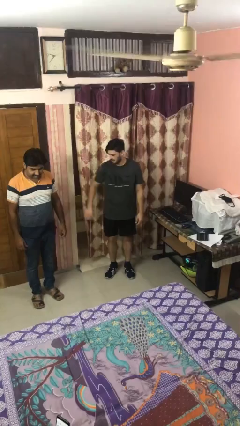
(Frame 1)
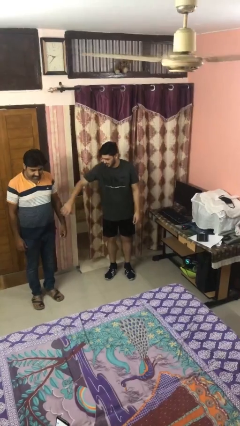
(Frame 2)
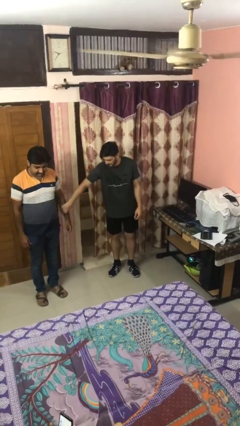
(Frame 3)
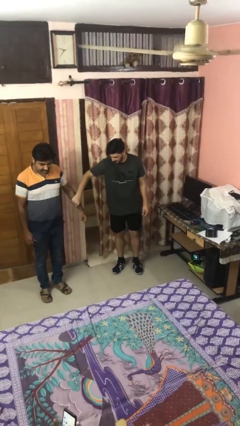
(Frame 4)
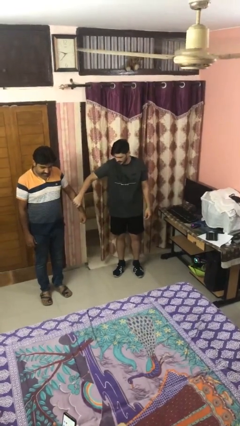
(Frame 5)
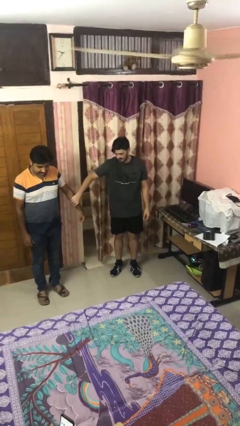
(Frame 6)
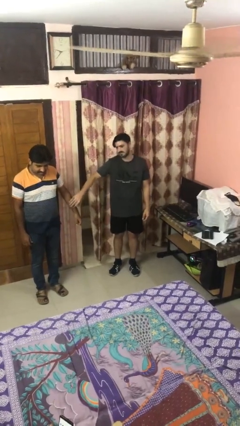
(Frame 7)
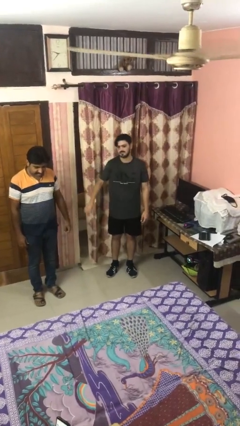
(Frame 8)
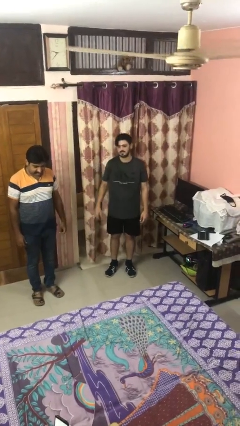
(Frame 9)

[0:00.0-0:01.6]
person grabs person by forearm

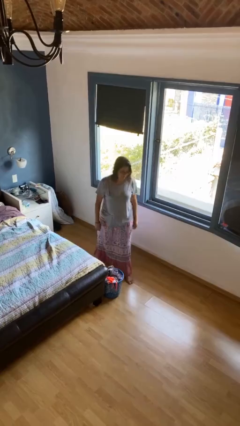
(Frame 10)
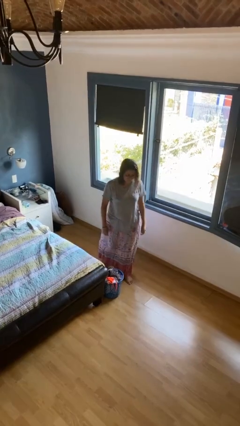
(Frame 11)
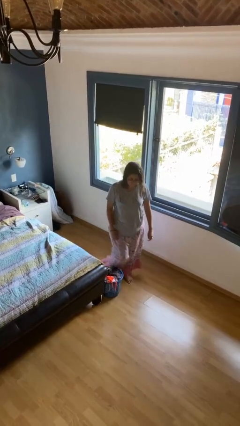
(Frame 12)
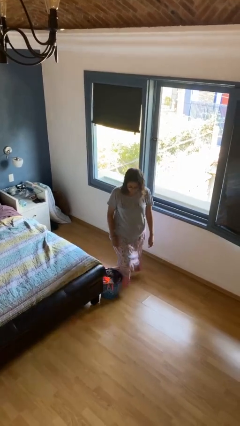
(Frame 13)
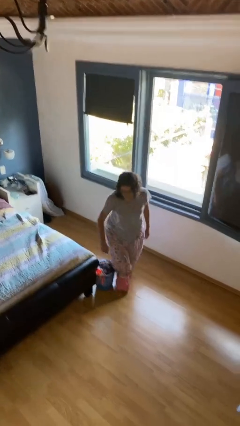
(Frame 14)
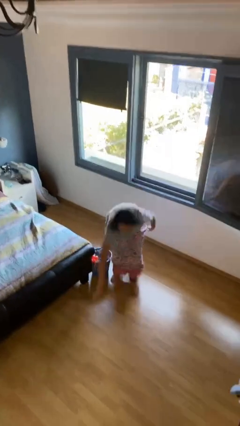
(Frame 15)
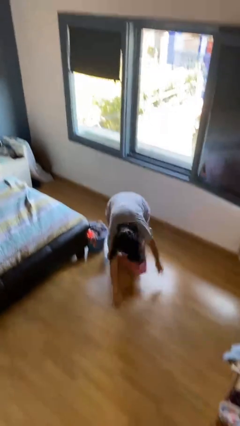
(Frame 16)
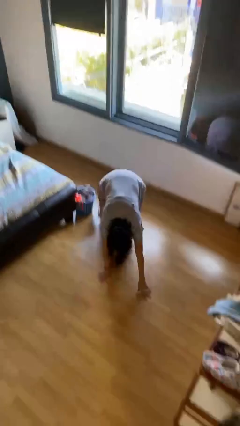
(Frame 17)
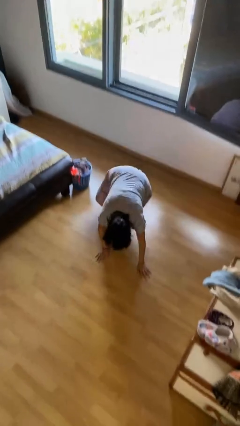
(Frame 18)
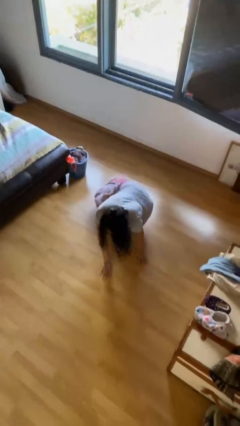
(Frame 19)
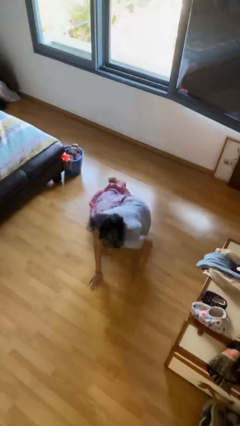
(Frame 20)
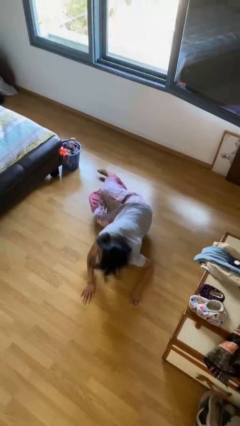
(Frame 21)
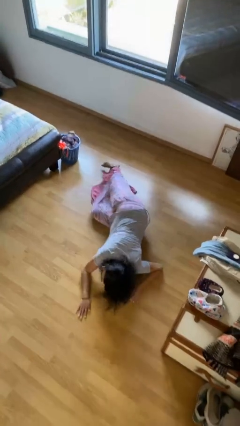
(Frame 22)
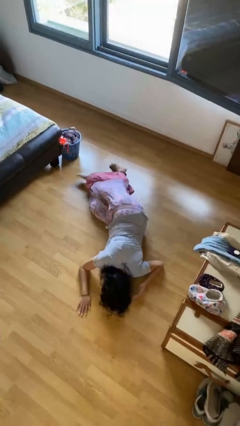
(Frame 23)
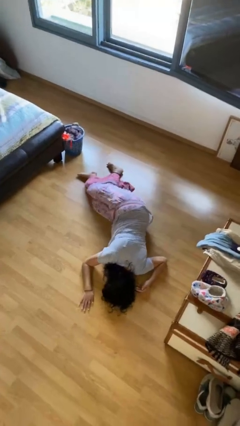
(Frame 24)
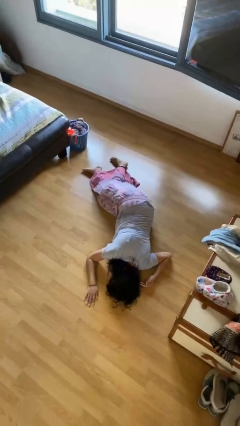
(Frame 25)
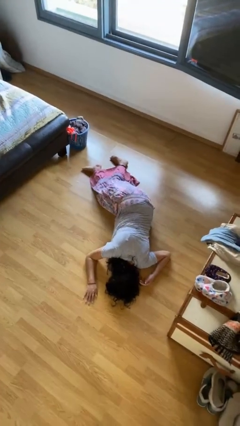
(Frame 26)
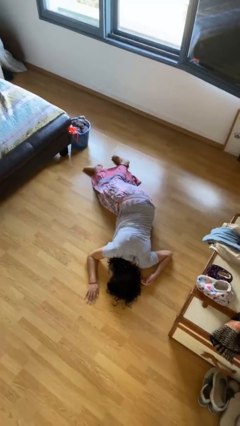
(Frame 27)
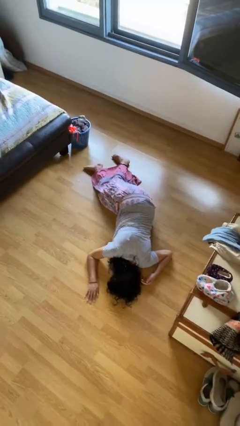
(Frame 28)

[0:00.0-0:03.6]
person trips on object on floor

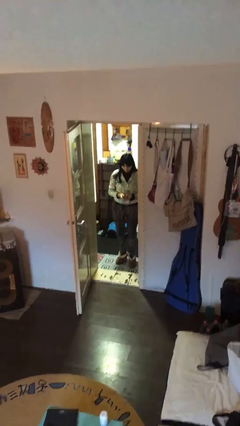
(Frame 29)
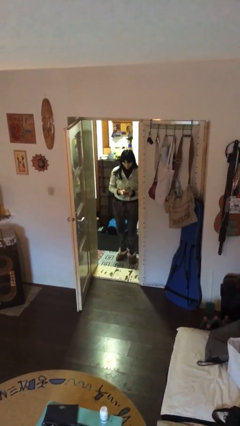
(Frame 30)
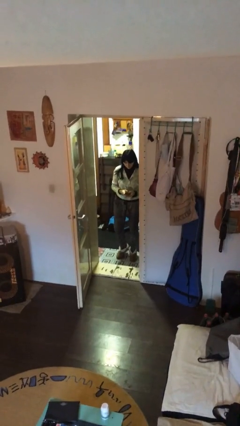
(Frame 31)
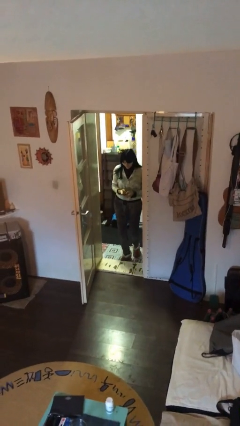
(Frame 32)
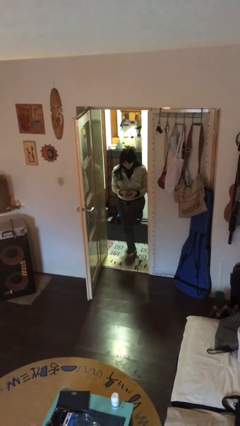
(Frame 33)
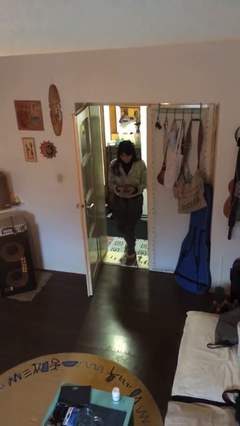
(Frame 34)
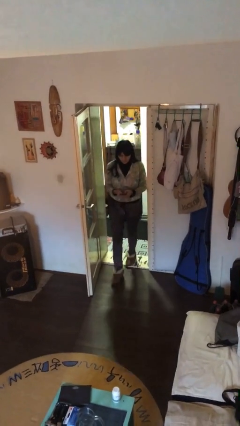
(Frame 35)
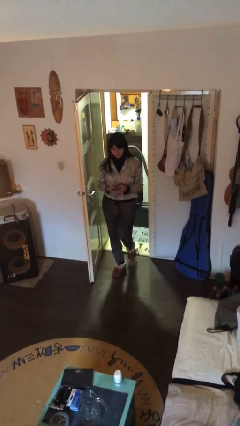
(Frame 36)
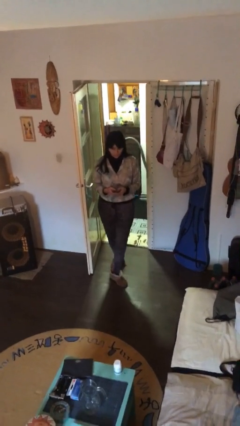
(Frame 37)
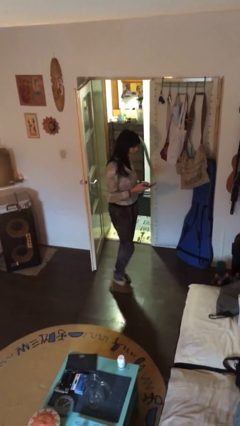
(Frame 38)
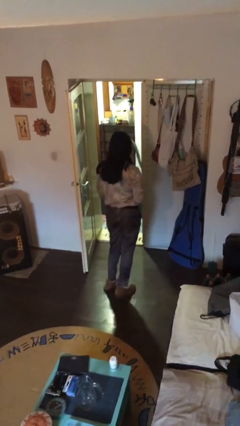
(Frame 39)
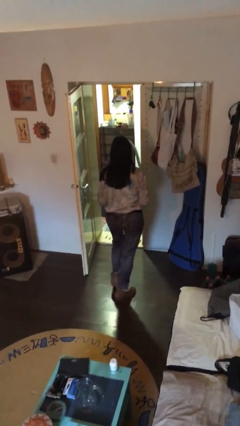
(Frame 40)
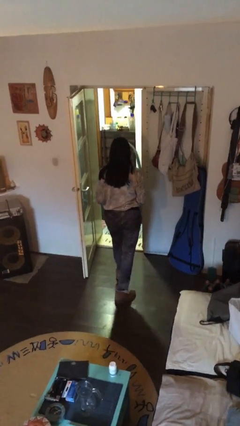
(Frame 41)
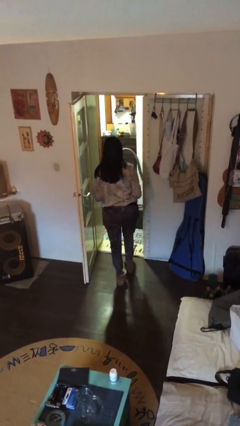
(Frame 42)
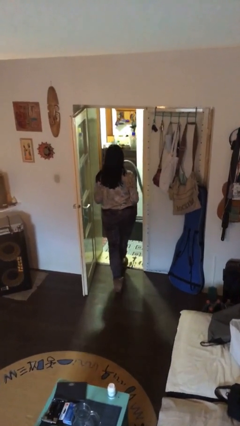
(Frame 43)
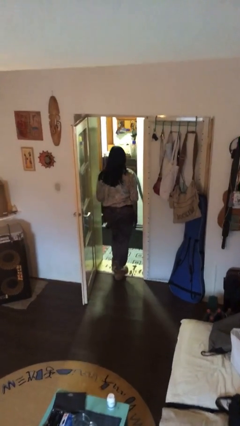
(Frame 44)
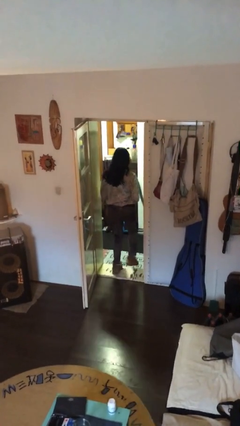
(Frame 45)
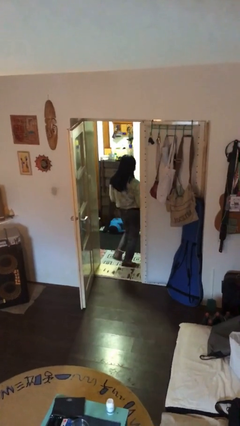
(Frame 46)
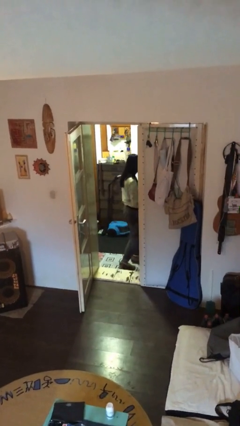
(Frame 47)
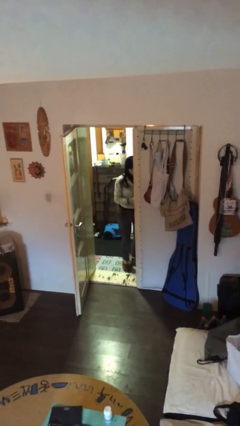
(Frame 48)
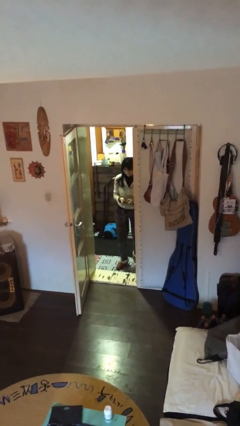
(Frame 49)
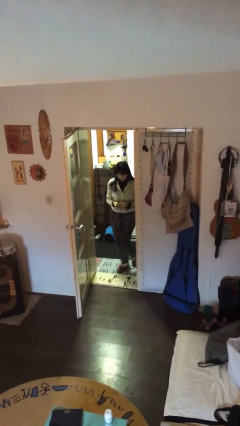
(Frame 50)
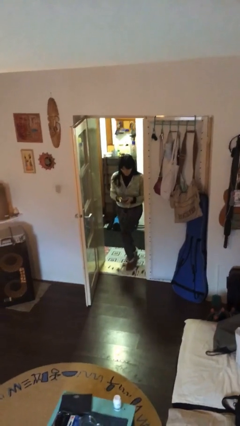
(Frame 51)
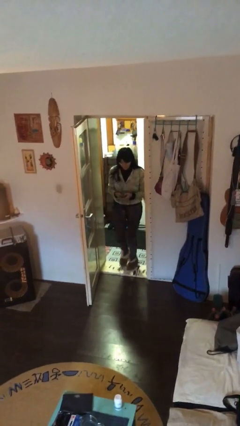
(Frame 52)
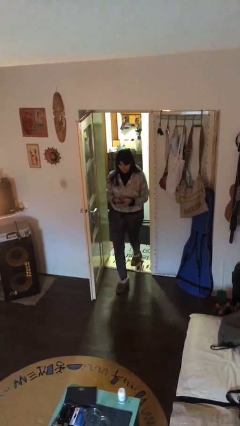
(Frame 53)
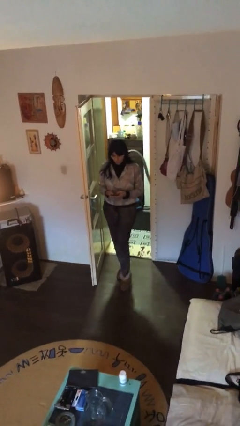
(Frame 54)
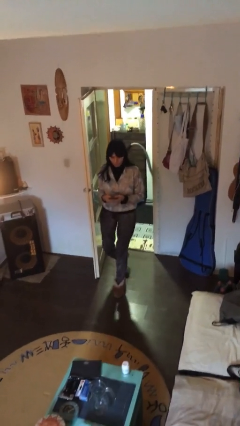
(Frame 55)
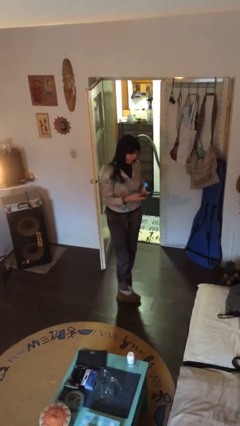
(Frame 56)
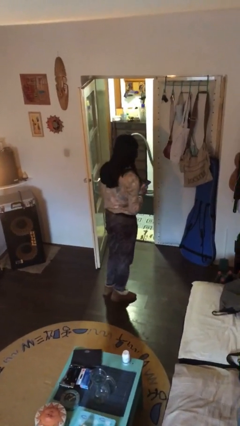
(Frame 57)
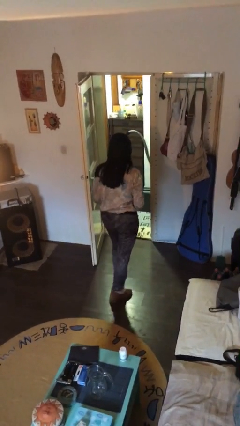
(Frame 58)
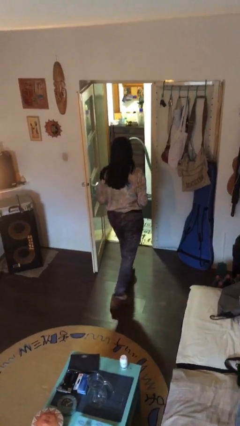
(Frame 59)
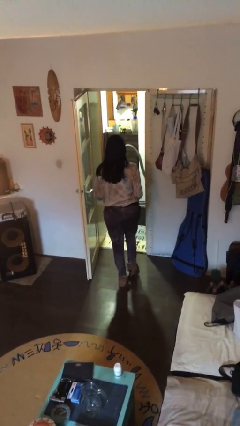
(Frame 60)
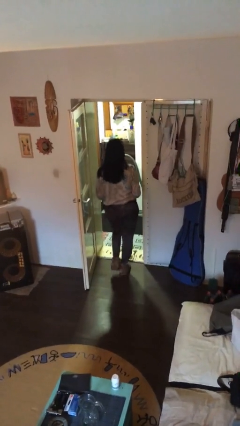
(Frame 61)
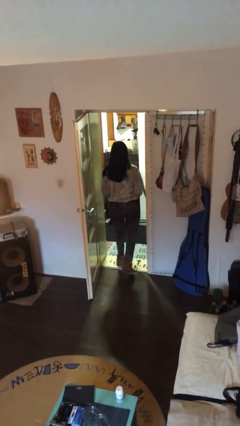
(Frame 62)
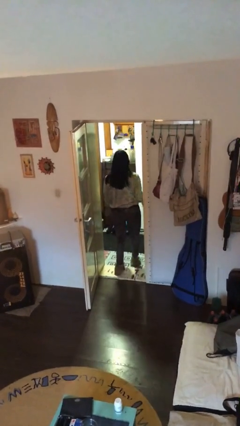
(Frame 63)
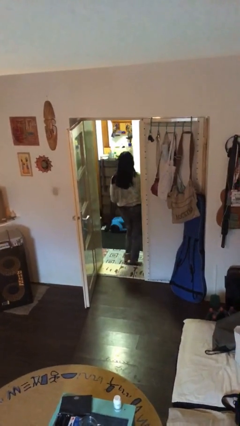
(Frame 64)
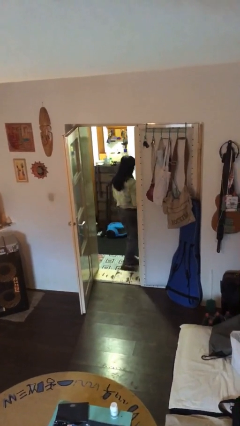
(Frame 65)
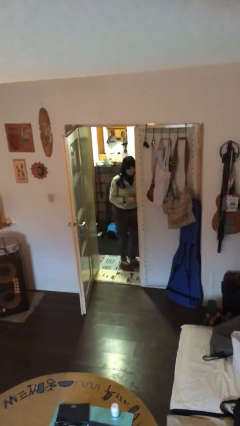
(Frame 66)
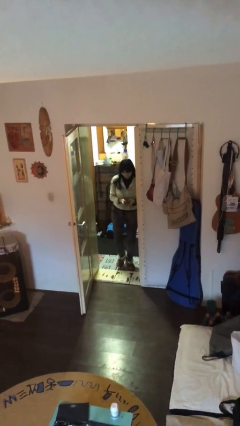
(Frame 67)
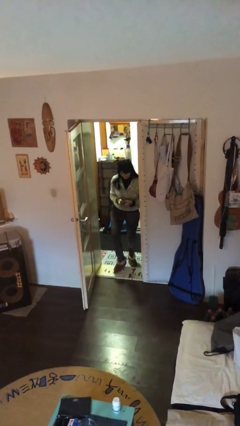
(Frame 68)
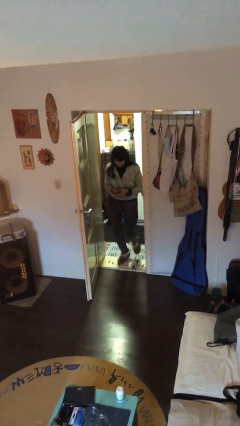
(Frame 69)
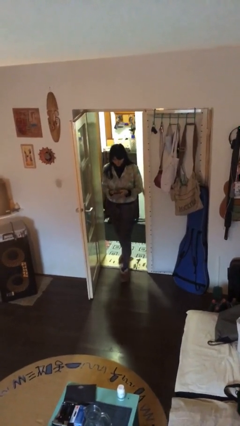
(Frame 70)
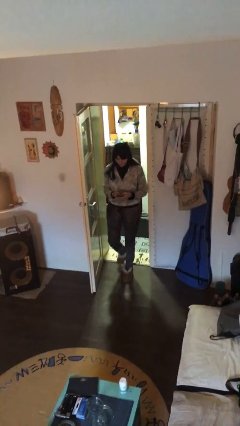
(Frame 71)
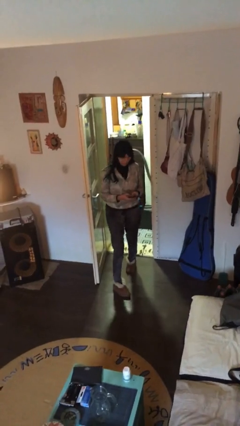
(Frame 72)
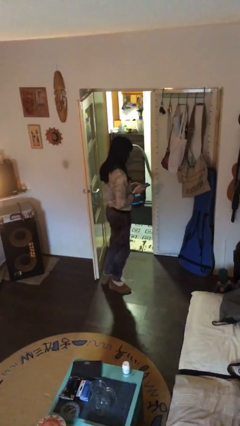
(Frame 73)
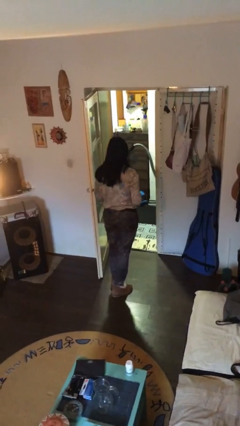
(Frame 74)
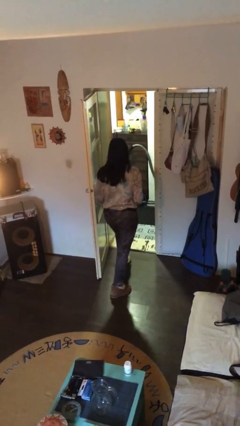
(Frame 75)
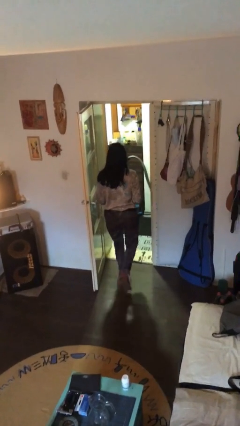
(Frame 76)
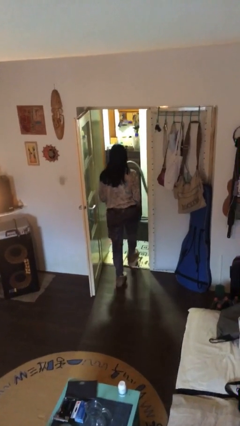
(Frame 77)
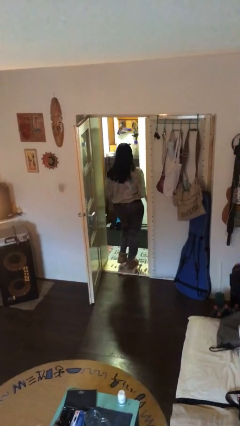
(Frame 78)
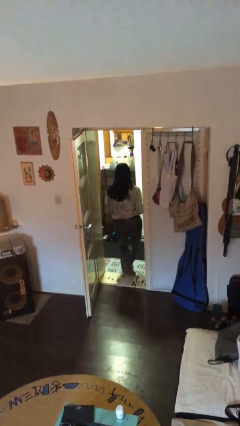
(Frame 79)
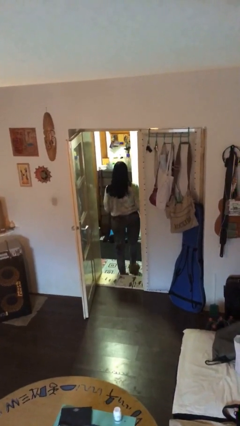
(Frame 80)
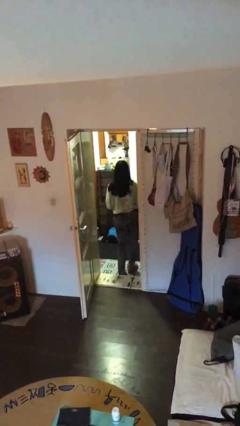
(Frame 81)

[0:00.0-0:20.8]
person texts on phone

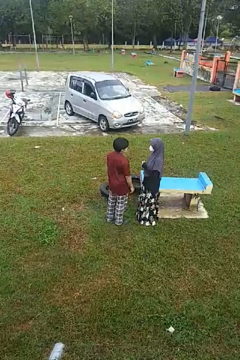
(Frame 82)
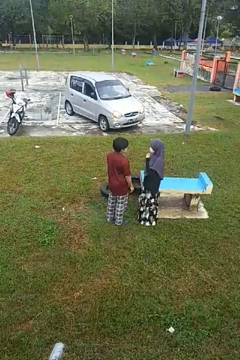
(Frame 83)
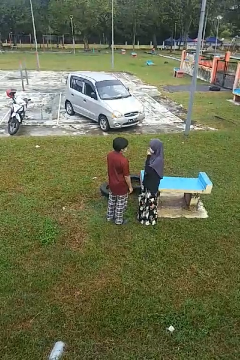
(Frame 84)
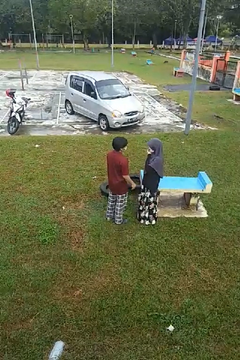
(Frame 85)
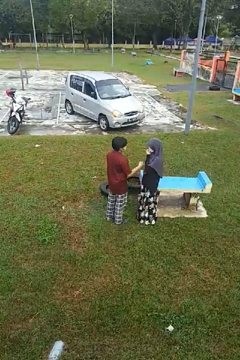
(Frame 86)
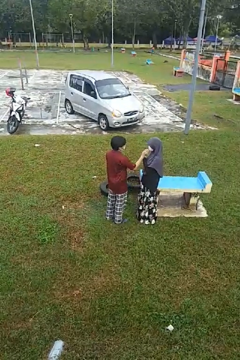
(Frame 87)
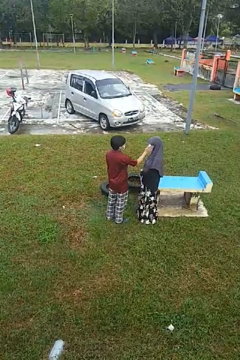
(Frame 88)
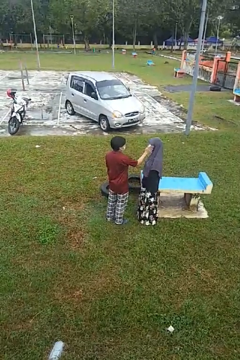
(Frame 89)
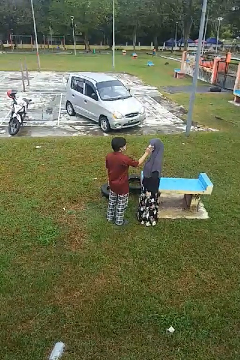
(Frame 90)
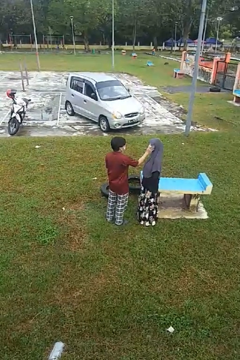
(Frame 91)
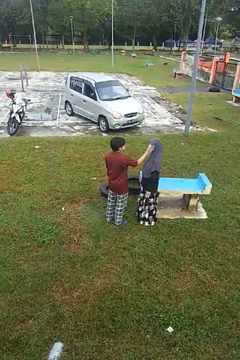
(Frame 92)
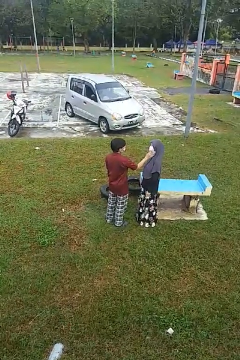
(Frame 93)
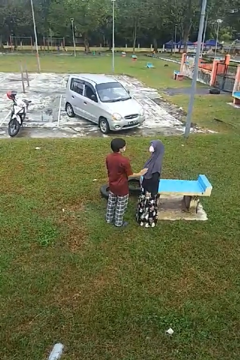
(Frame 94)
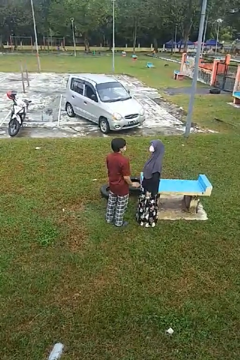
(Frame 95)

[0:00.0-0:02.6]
person touches face of person
